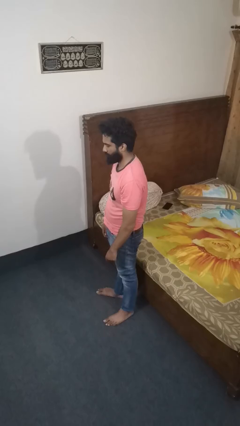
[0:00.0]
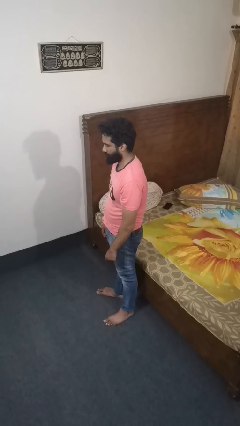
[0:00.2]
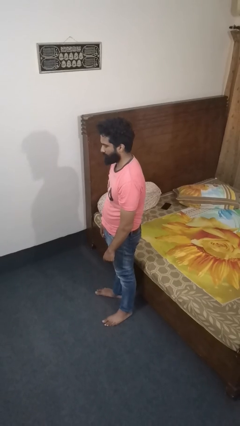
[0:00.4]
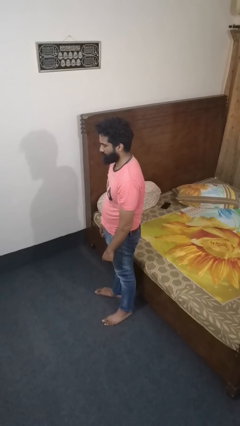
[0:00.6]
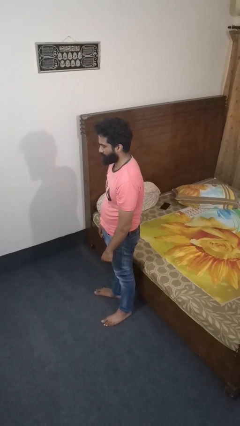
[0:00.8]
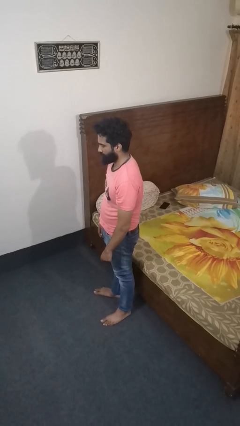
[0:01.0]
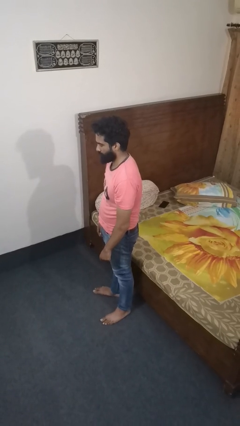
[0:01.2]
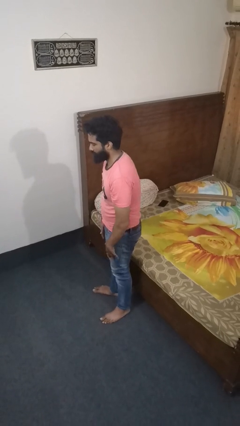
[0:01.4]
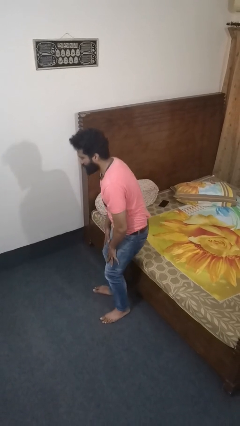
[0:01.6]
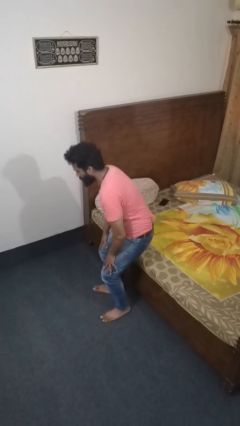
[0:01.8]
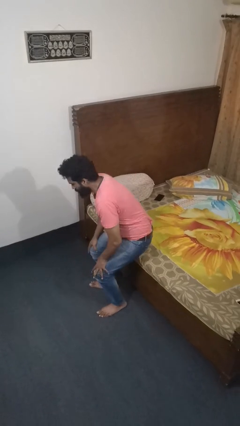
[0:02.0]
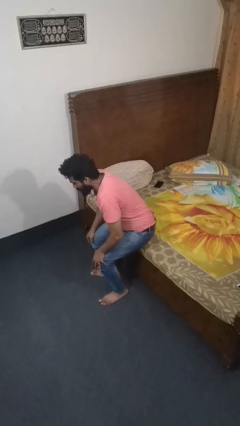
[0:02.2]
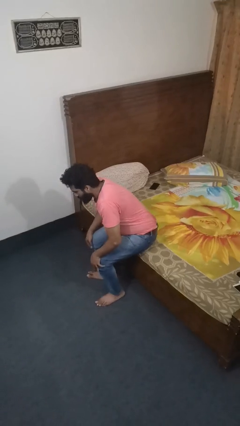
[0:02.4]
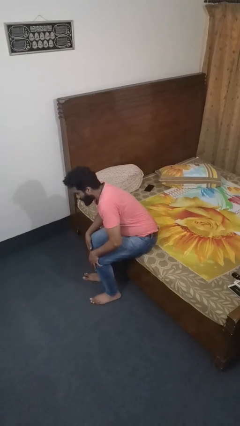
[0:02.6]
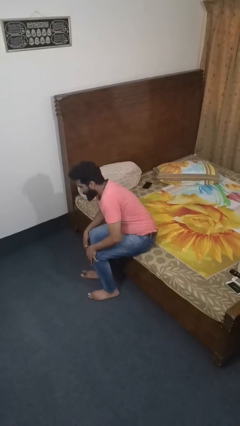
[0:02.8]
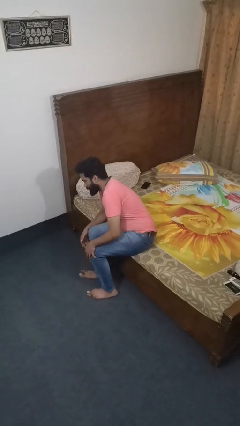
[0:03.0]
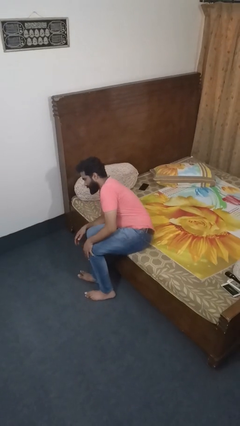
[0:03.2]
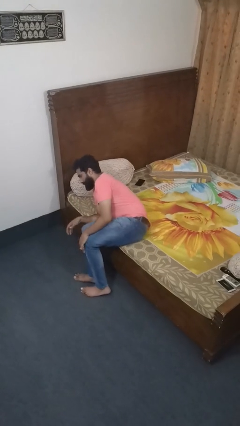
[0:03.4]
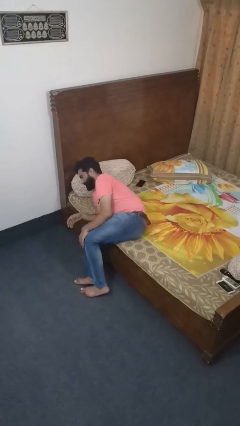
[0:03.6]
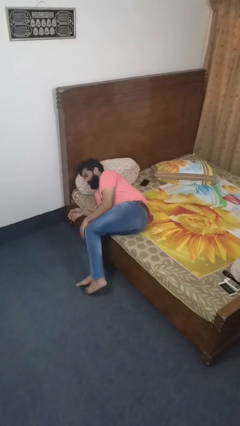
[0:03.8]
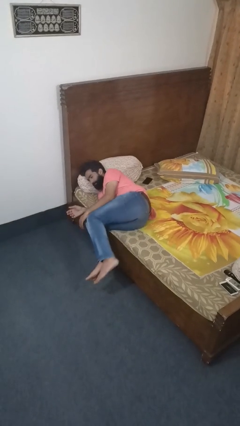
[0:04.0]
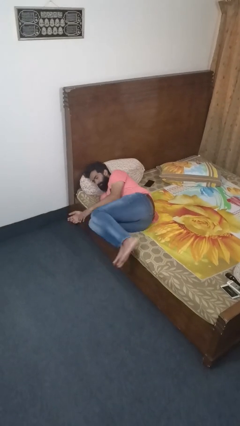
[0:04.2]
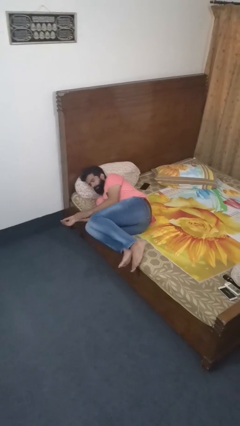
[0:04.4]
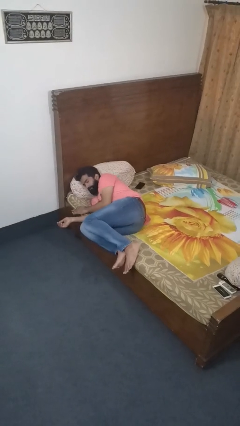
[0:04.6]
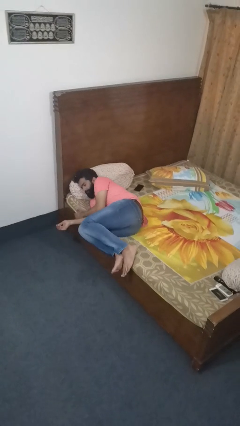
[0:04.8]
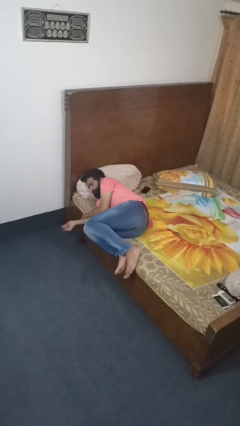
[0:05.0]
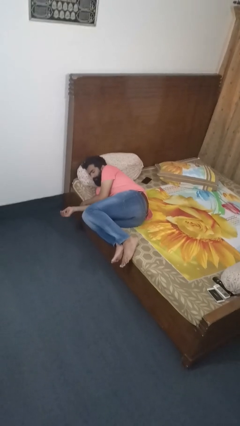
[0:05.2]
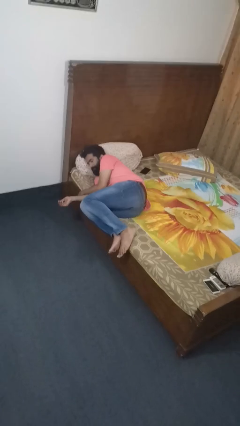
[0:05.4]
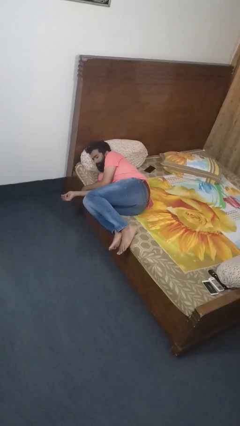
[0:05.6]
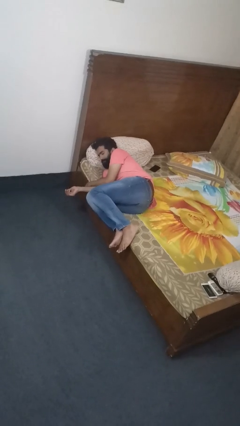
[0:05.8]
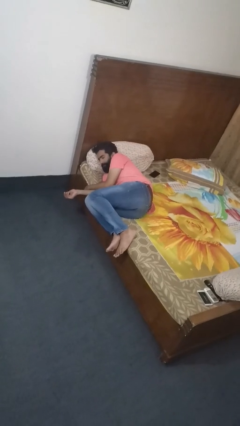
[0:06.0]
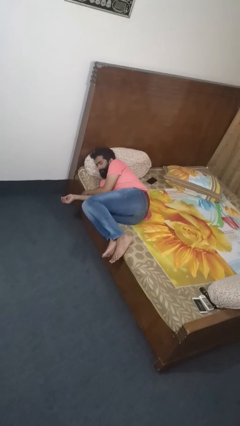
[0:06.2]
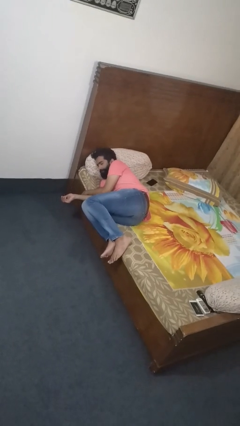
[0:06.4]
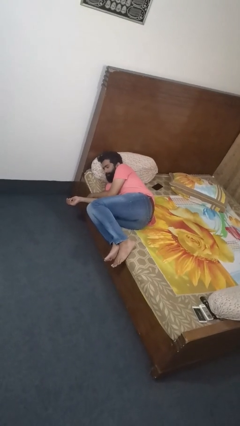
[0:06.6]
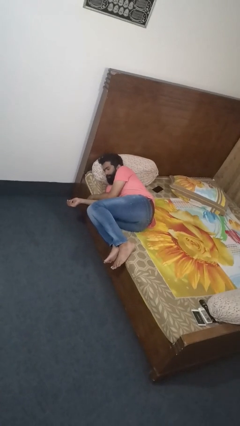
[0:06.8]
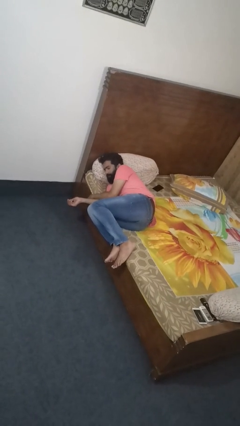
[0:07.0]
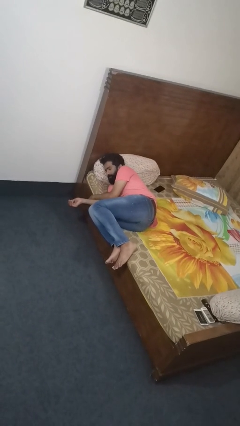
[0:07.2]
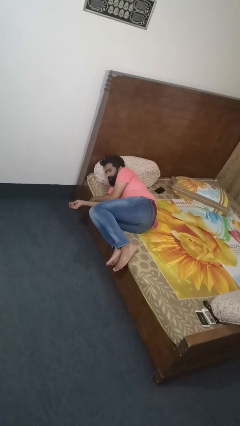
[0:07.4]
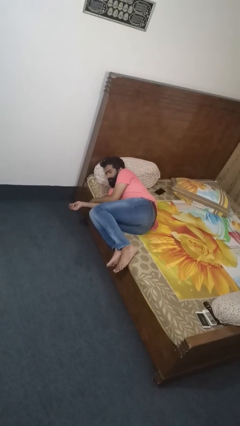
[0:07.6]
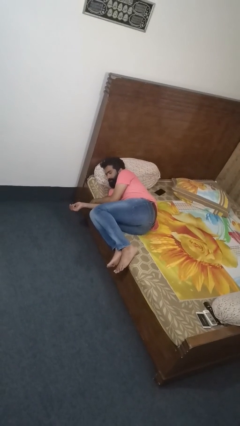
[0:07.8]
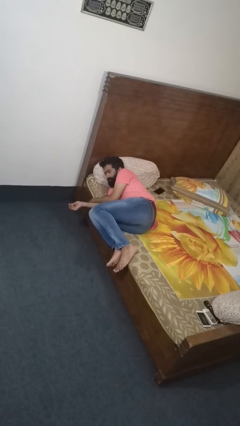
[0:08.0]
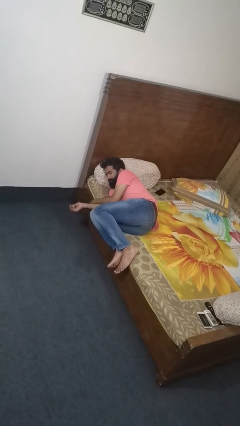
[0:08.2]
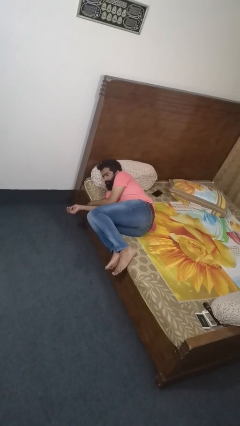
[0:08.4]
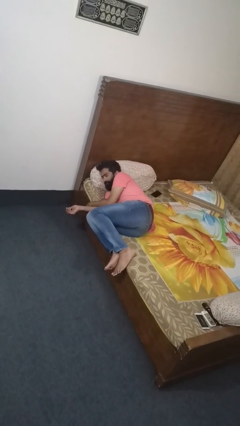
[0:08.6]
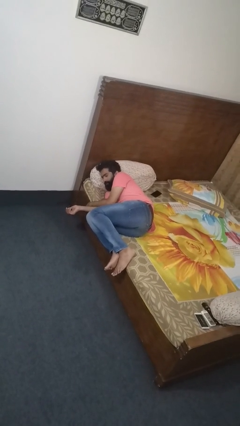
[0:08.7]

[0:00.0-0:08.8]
person lies down on bed

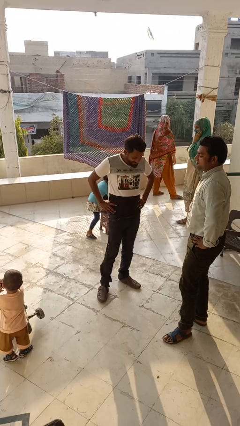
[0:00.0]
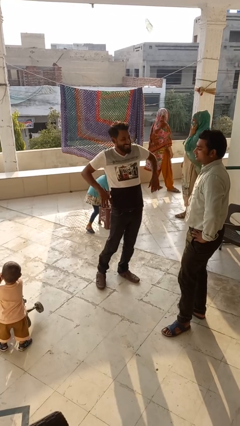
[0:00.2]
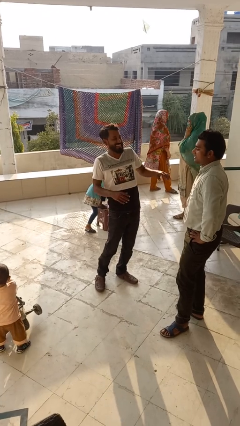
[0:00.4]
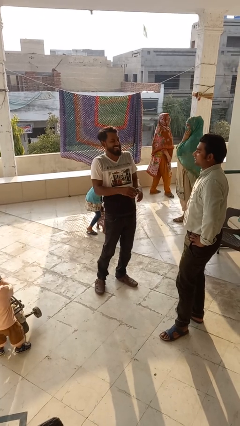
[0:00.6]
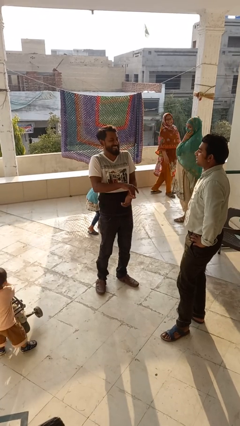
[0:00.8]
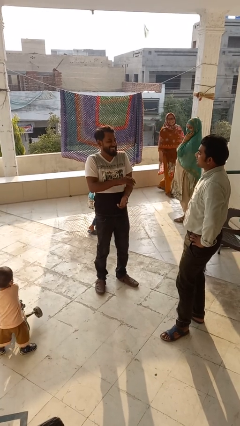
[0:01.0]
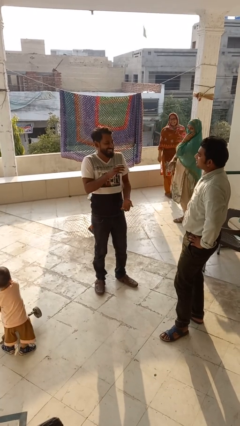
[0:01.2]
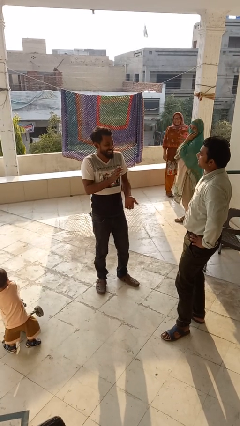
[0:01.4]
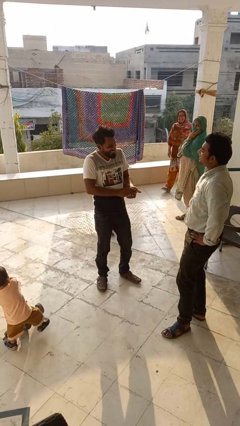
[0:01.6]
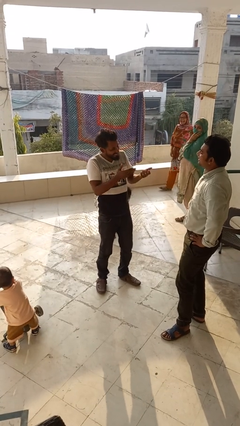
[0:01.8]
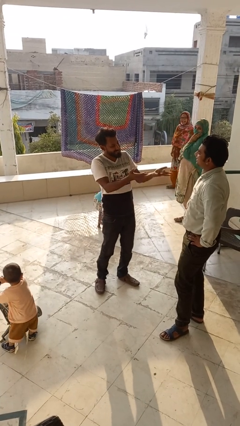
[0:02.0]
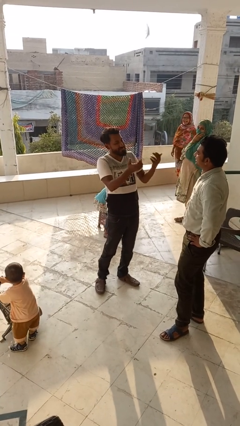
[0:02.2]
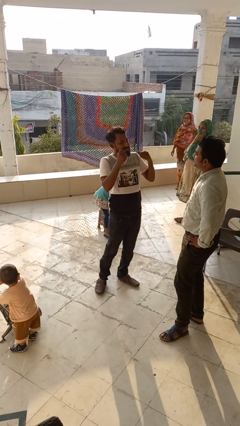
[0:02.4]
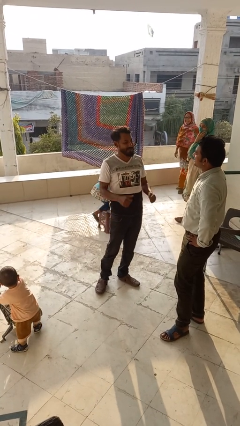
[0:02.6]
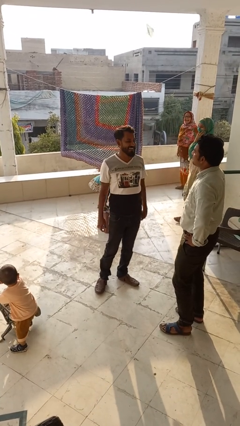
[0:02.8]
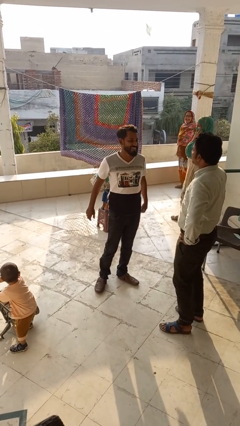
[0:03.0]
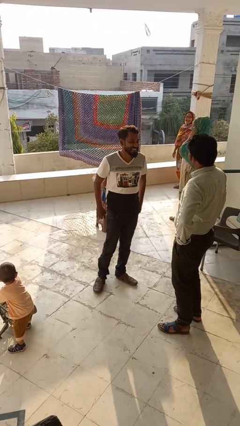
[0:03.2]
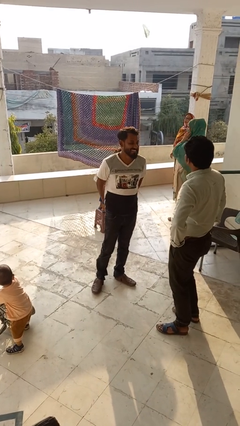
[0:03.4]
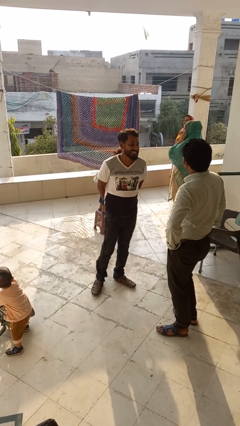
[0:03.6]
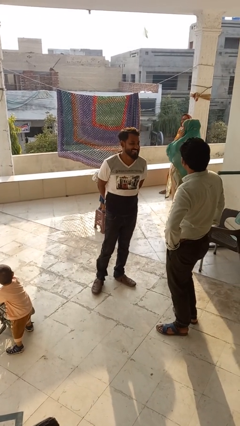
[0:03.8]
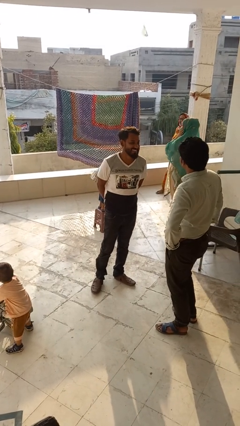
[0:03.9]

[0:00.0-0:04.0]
person laughs with person

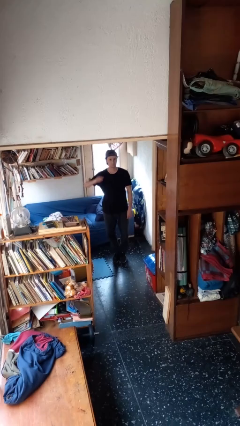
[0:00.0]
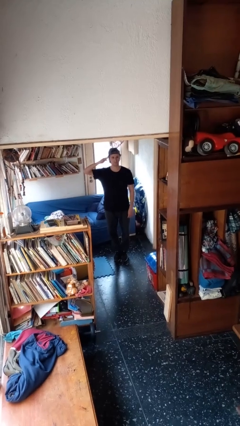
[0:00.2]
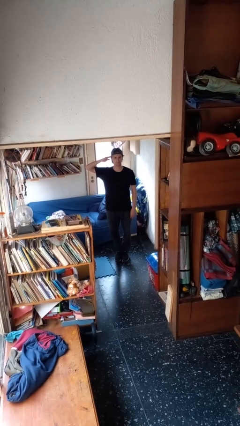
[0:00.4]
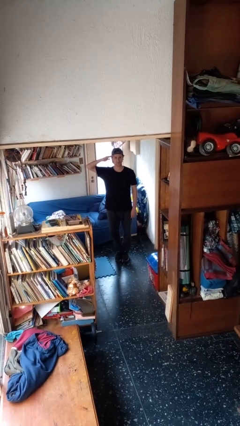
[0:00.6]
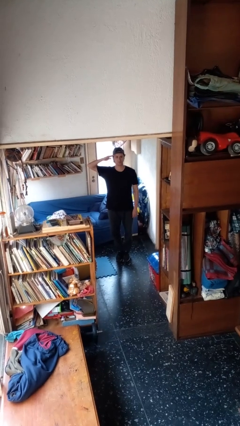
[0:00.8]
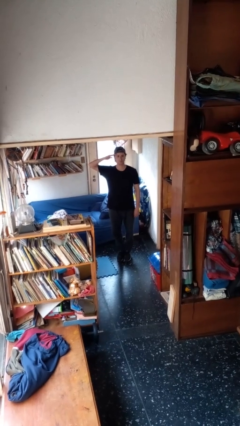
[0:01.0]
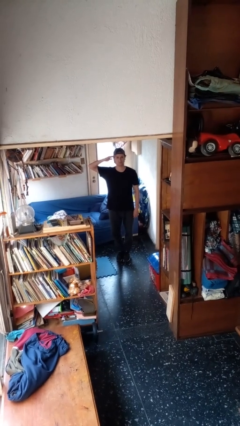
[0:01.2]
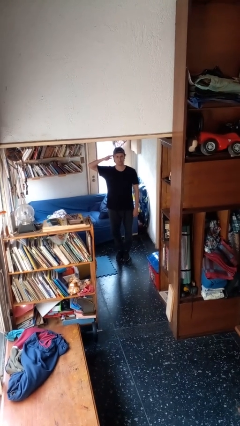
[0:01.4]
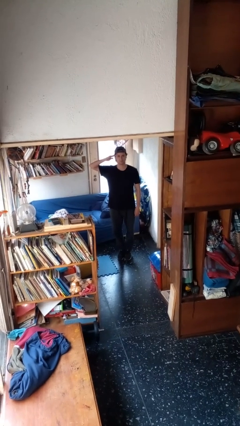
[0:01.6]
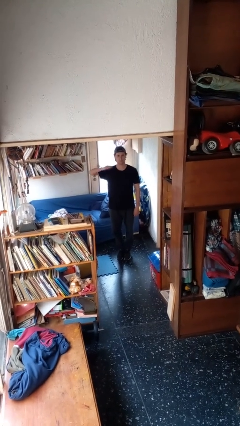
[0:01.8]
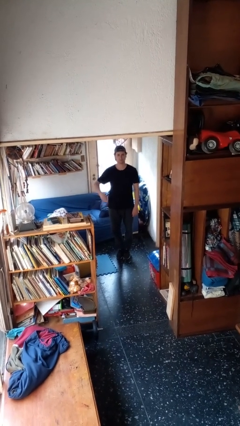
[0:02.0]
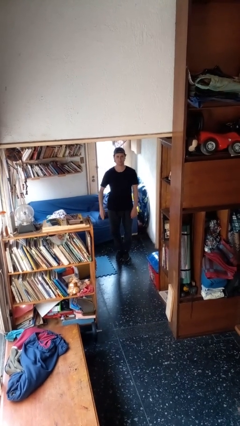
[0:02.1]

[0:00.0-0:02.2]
person salutes

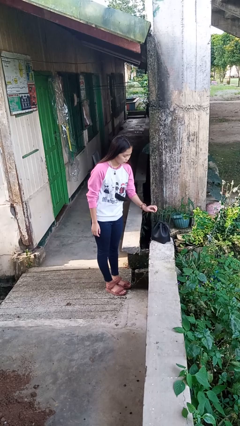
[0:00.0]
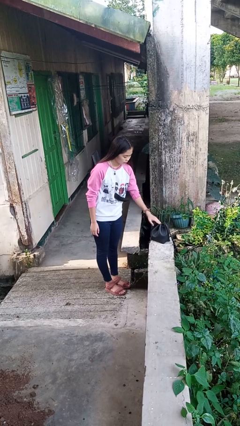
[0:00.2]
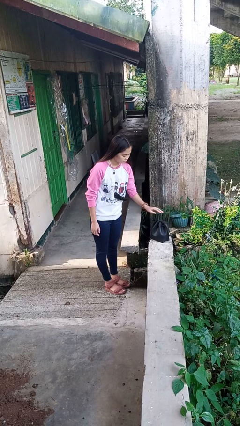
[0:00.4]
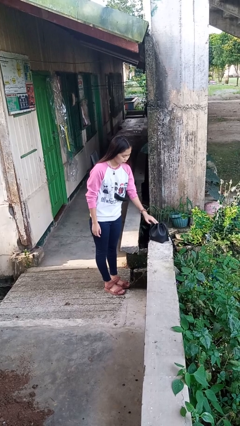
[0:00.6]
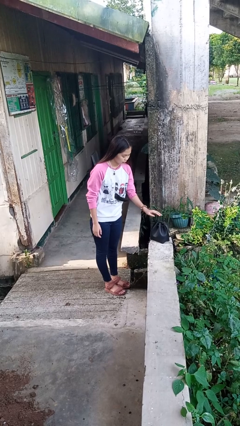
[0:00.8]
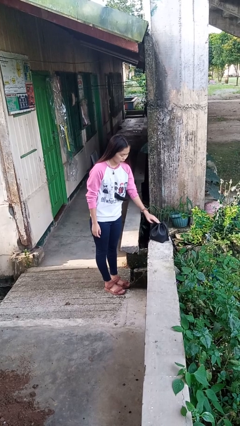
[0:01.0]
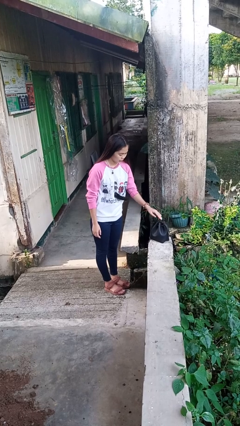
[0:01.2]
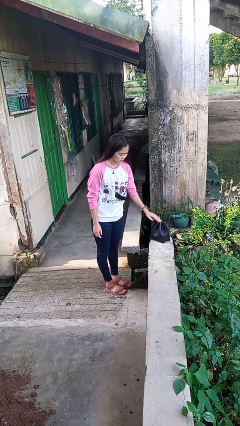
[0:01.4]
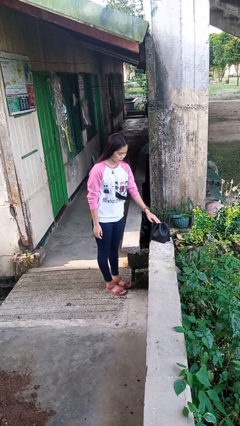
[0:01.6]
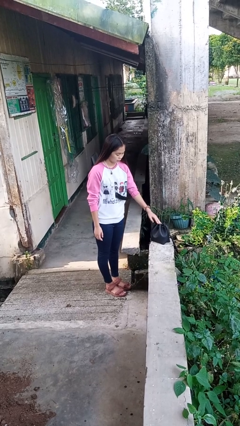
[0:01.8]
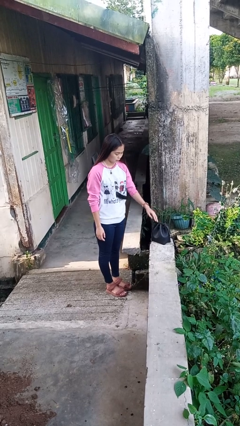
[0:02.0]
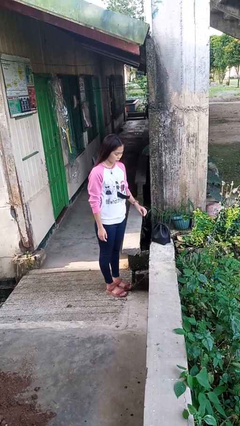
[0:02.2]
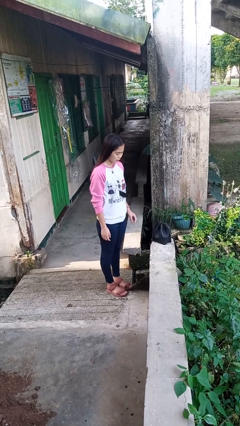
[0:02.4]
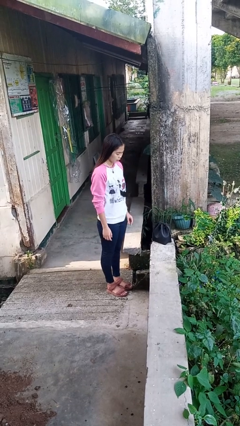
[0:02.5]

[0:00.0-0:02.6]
person taps object with finger
